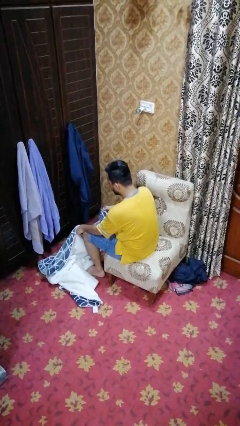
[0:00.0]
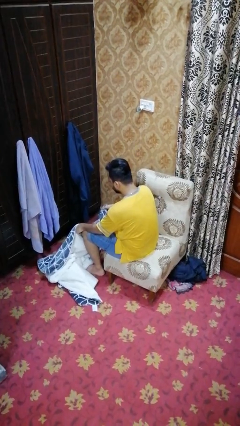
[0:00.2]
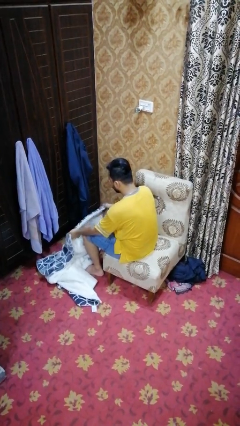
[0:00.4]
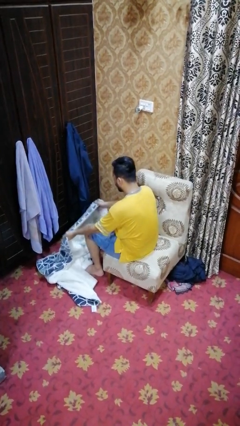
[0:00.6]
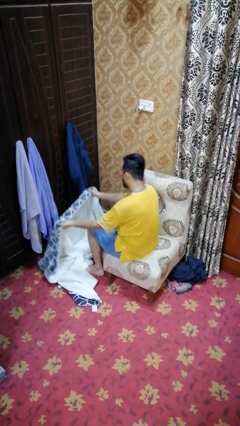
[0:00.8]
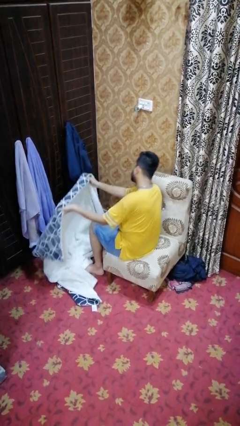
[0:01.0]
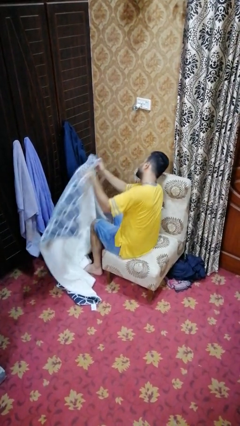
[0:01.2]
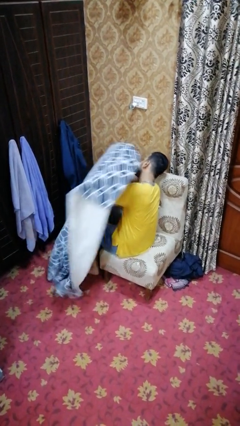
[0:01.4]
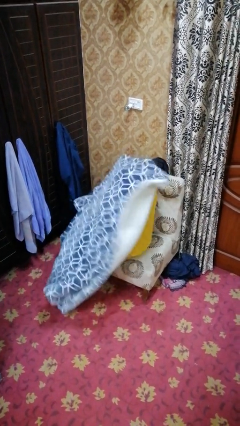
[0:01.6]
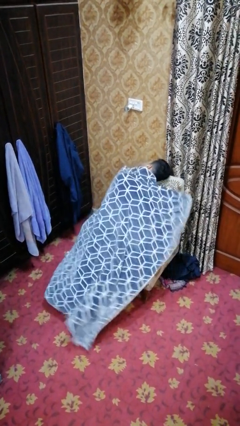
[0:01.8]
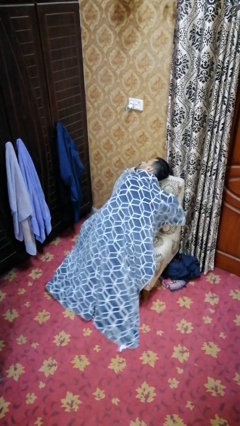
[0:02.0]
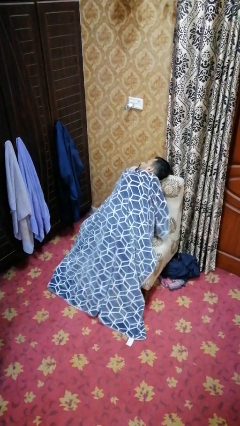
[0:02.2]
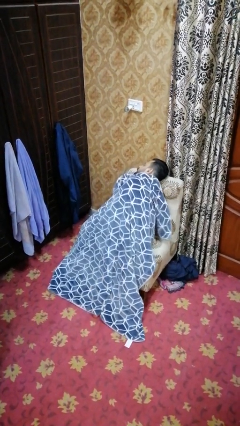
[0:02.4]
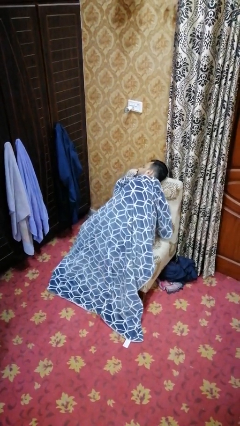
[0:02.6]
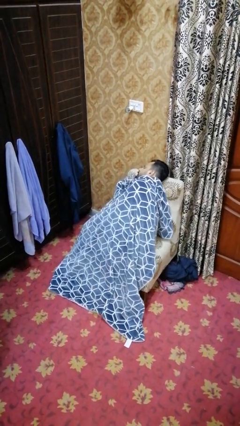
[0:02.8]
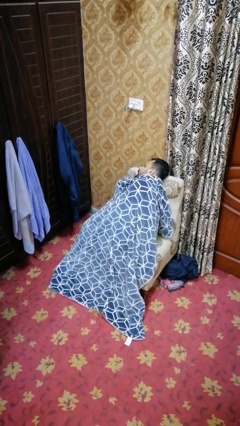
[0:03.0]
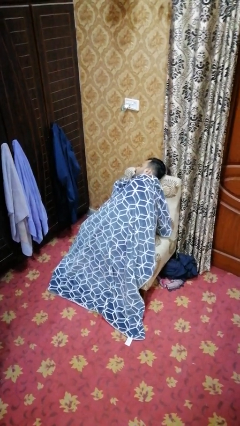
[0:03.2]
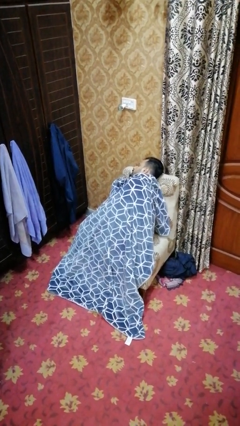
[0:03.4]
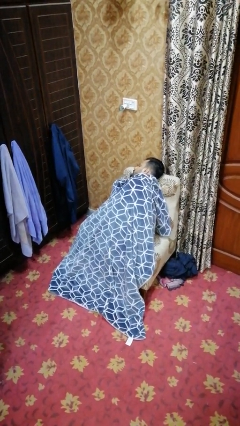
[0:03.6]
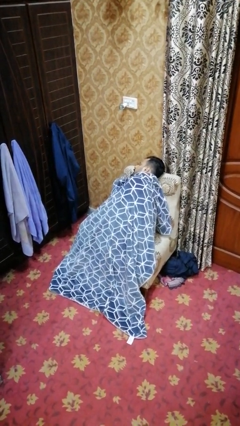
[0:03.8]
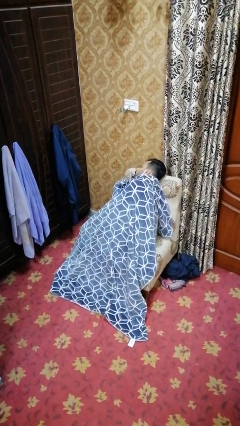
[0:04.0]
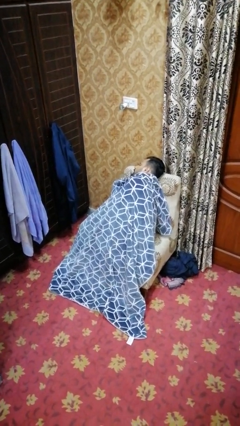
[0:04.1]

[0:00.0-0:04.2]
person covers with blanket

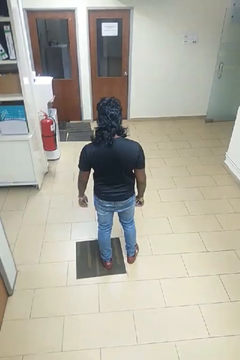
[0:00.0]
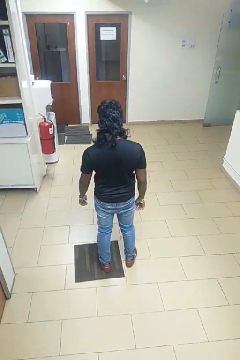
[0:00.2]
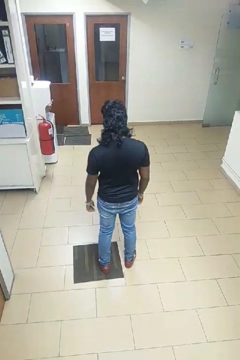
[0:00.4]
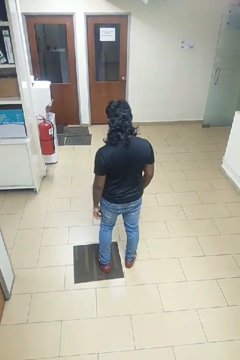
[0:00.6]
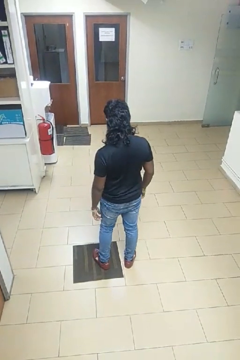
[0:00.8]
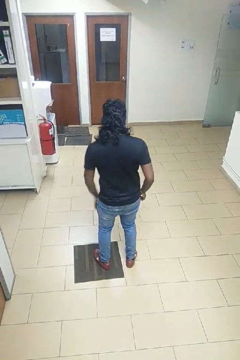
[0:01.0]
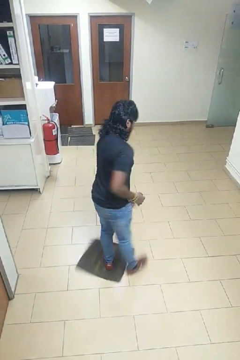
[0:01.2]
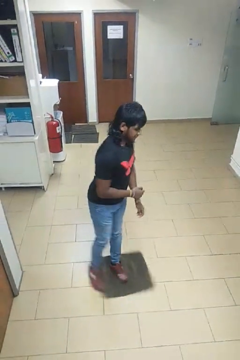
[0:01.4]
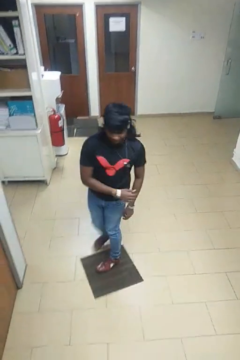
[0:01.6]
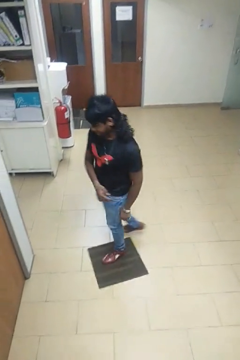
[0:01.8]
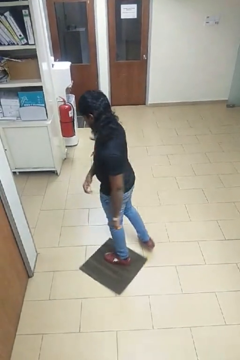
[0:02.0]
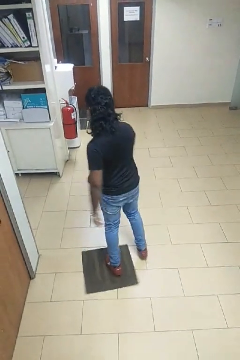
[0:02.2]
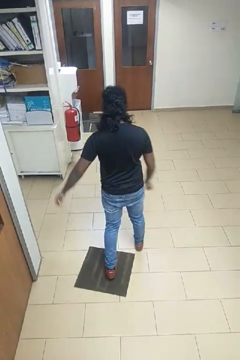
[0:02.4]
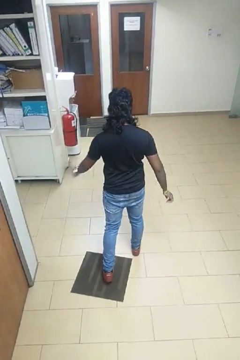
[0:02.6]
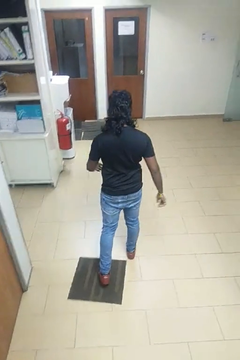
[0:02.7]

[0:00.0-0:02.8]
person twirls

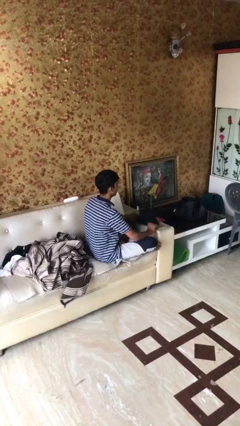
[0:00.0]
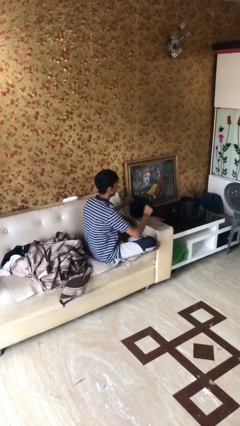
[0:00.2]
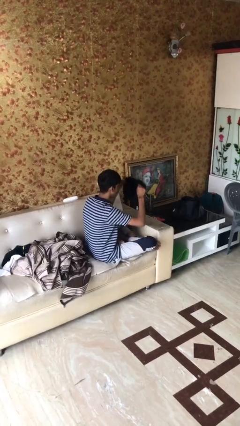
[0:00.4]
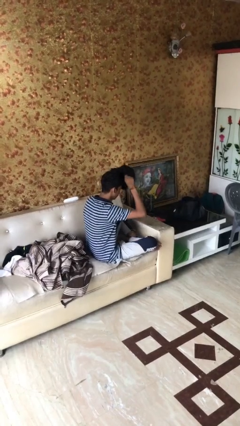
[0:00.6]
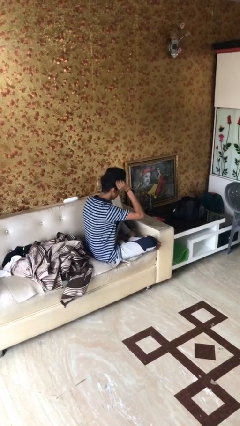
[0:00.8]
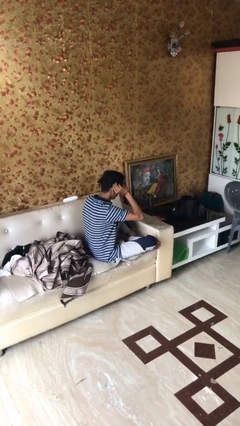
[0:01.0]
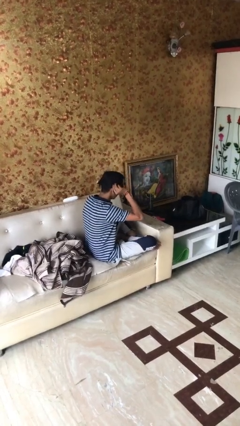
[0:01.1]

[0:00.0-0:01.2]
person puts on hat

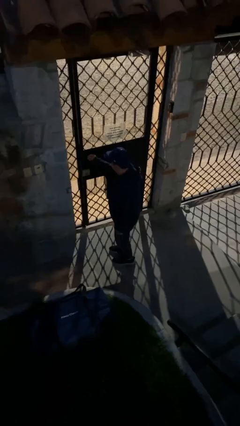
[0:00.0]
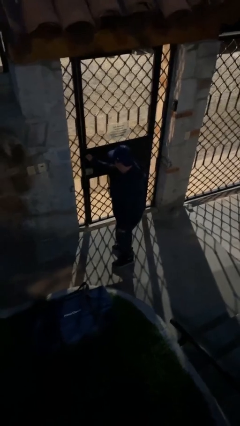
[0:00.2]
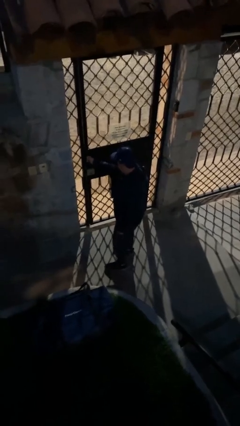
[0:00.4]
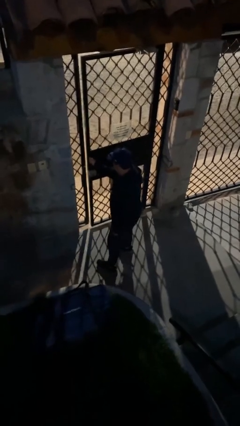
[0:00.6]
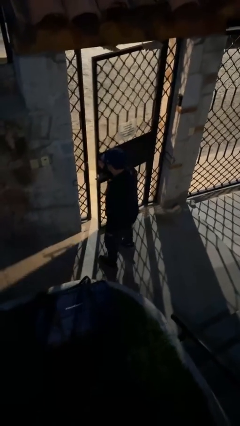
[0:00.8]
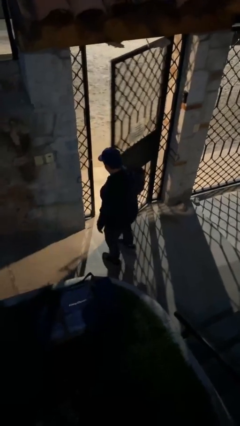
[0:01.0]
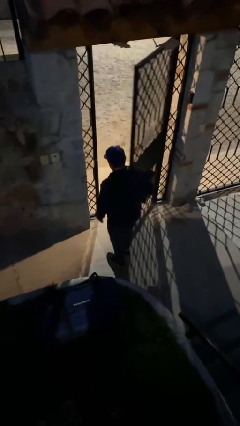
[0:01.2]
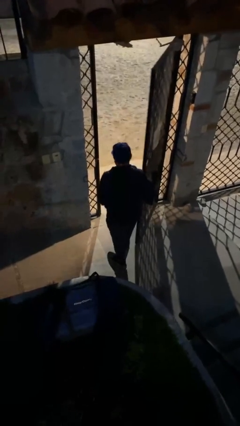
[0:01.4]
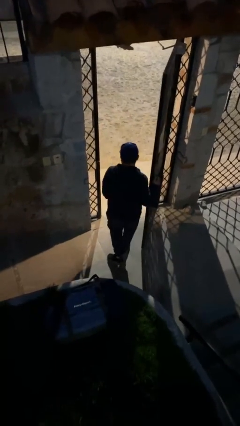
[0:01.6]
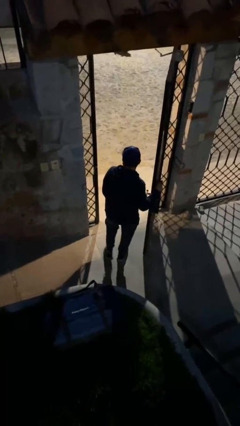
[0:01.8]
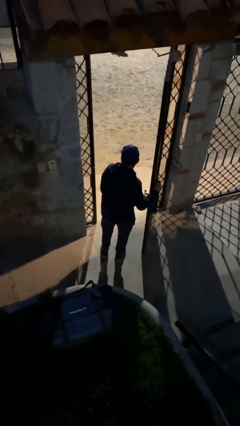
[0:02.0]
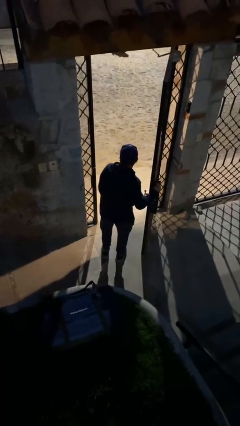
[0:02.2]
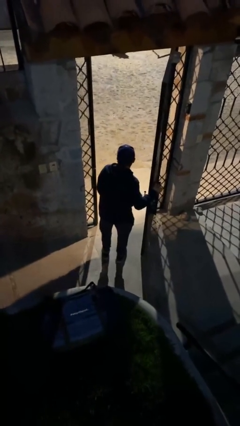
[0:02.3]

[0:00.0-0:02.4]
person opens facility door

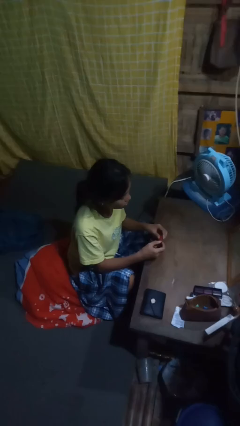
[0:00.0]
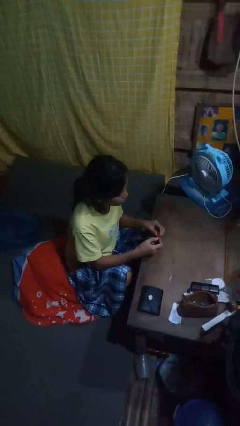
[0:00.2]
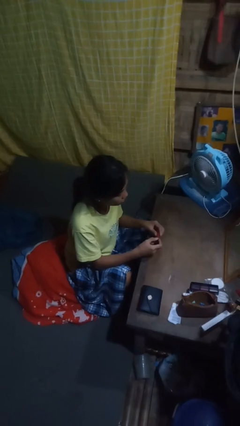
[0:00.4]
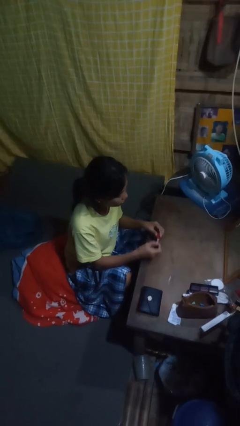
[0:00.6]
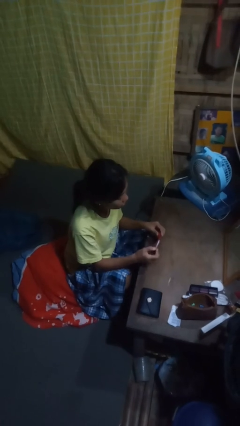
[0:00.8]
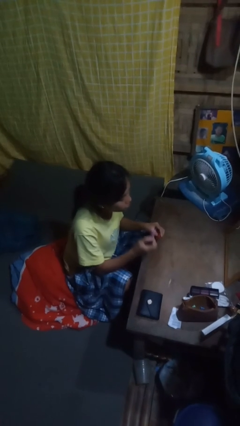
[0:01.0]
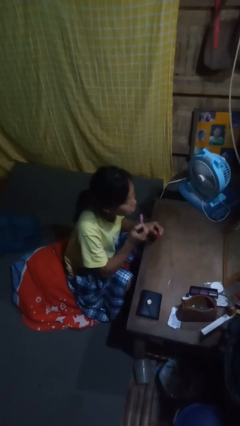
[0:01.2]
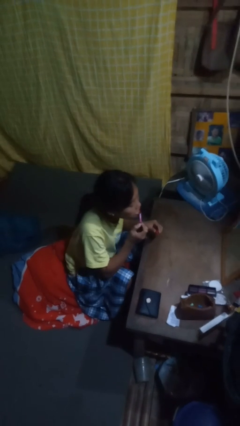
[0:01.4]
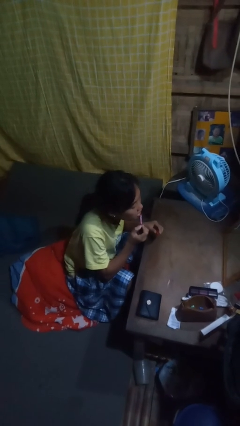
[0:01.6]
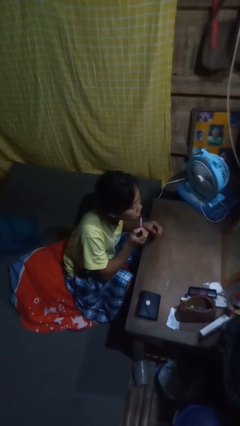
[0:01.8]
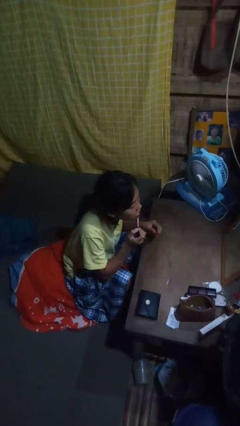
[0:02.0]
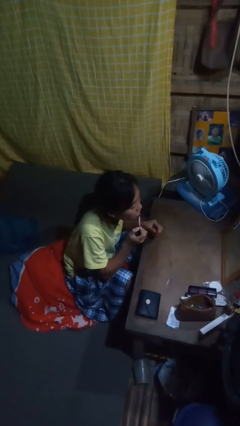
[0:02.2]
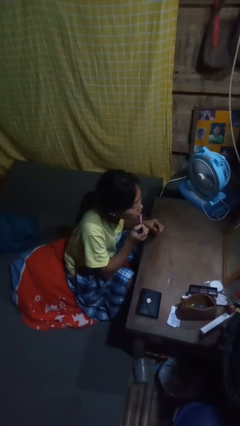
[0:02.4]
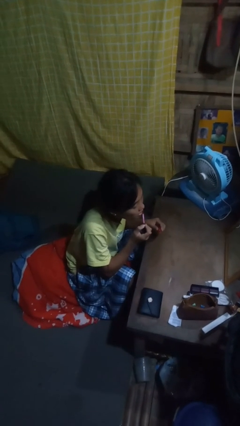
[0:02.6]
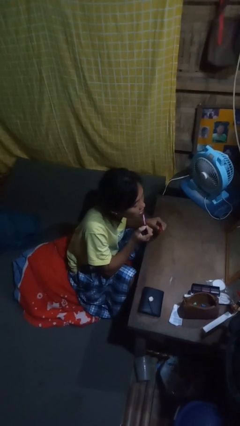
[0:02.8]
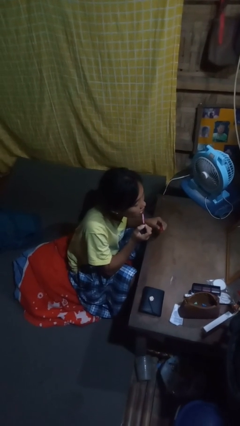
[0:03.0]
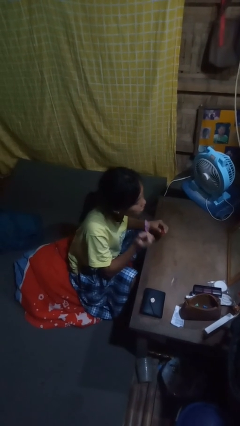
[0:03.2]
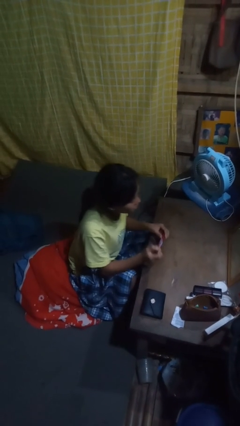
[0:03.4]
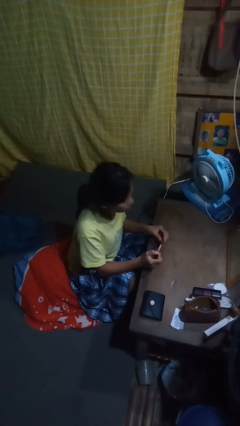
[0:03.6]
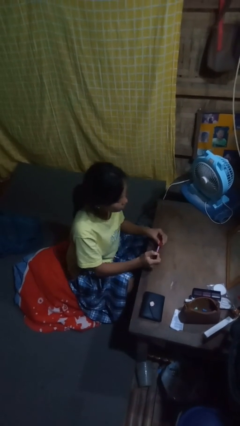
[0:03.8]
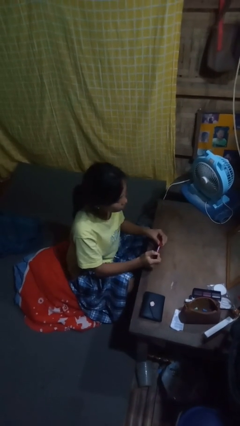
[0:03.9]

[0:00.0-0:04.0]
person applies lip makeup

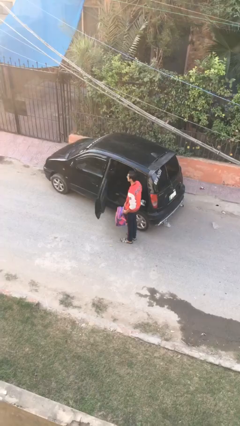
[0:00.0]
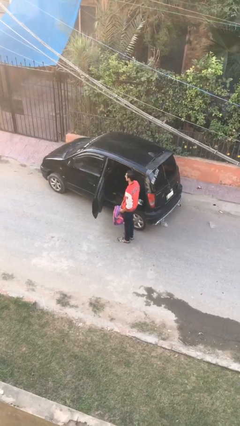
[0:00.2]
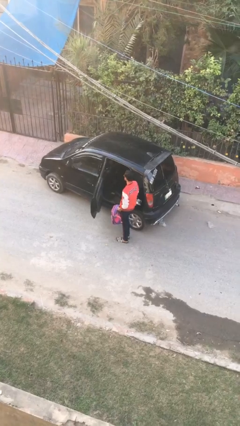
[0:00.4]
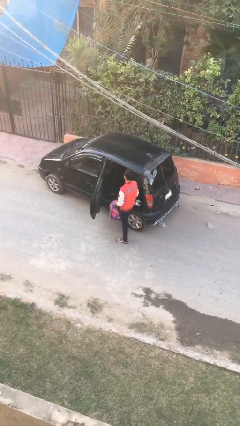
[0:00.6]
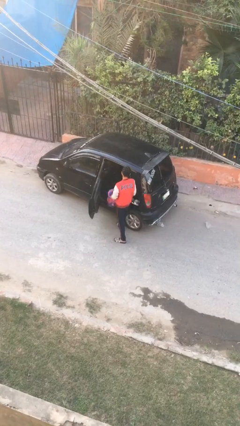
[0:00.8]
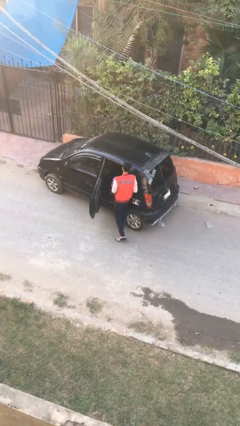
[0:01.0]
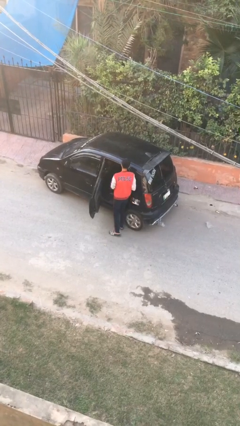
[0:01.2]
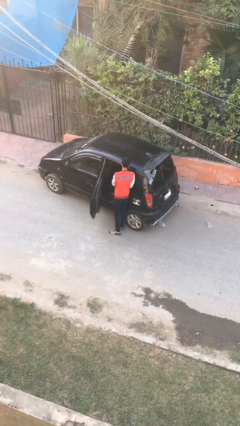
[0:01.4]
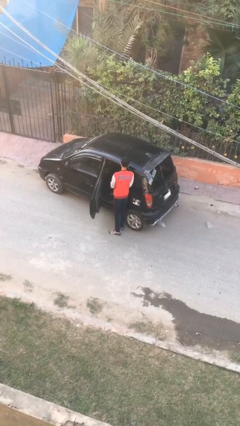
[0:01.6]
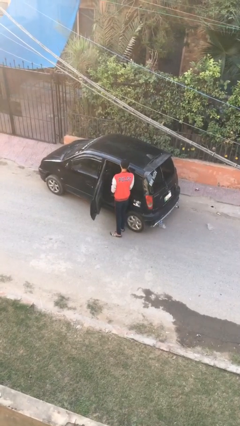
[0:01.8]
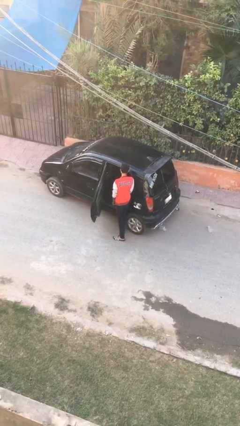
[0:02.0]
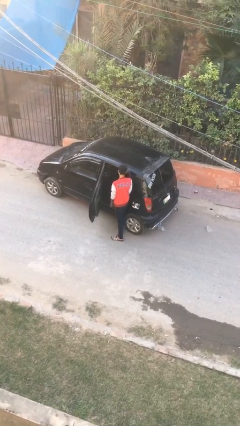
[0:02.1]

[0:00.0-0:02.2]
person loads car

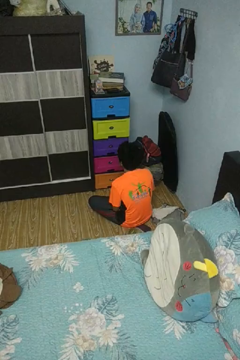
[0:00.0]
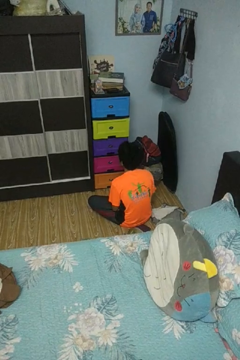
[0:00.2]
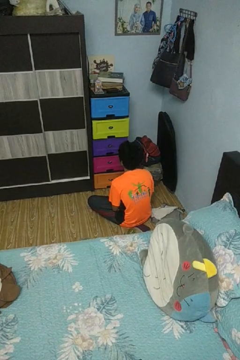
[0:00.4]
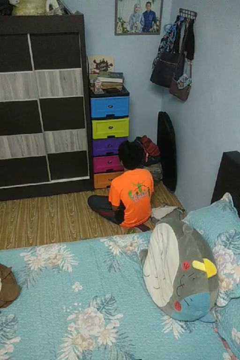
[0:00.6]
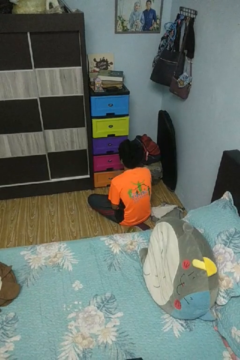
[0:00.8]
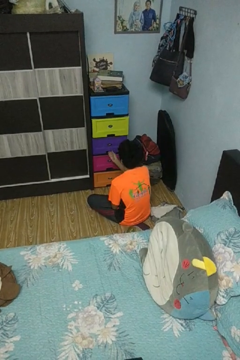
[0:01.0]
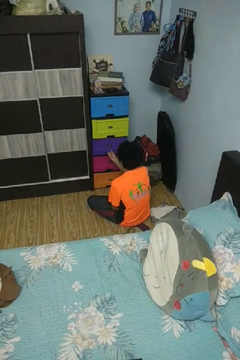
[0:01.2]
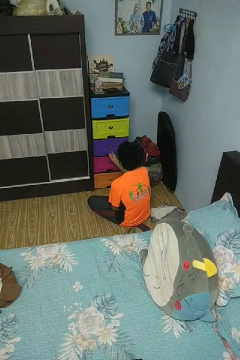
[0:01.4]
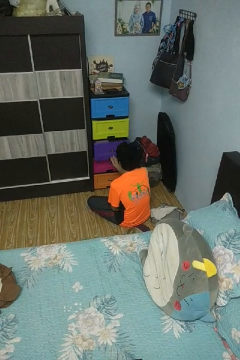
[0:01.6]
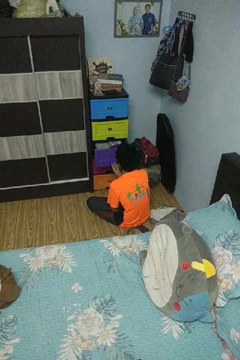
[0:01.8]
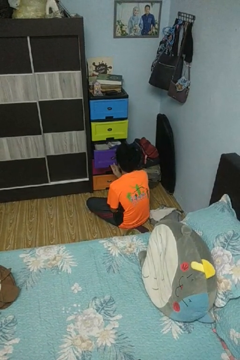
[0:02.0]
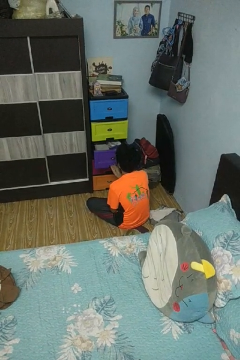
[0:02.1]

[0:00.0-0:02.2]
person opens dresser drawer
